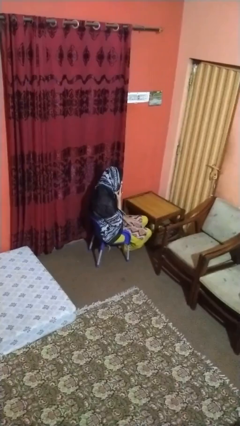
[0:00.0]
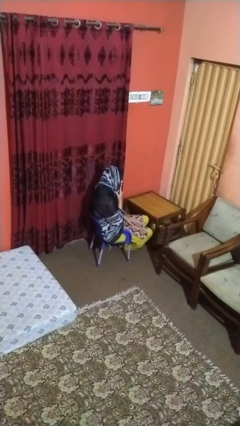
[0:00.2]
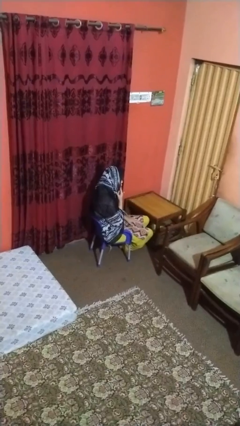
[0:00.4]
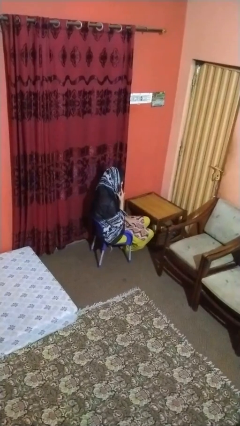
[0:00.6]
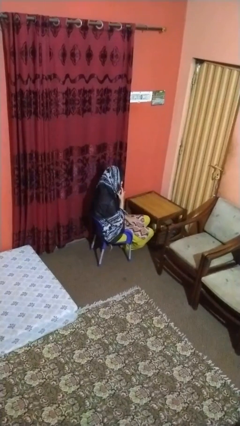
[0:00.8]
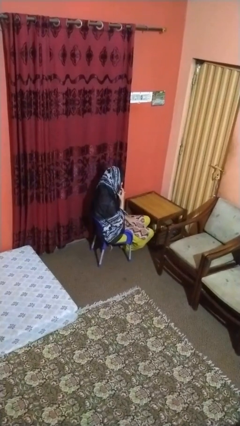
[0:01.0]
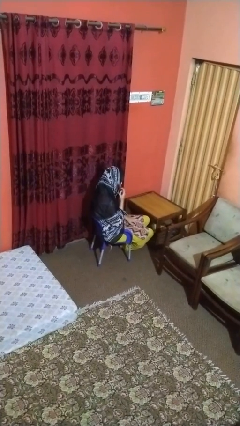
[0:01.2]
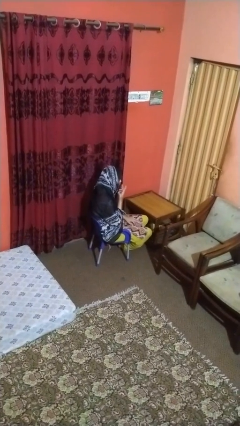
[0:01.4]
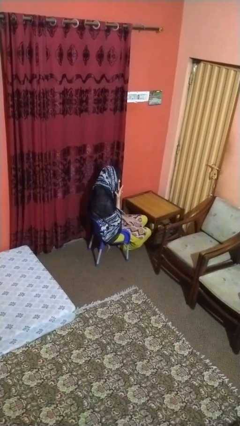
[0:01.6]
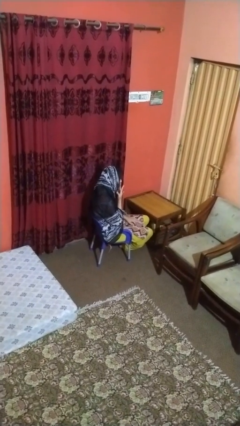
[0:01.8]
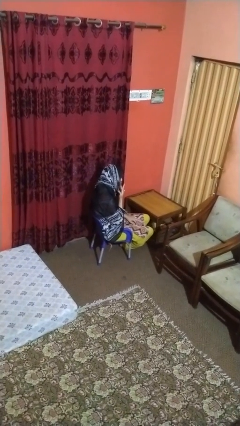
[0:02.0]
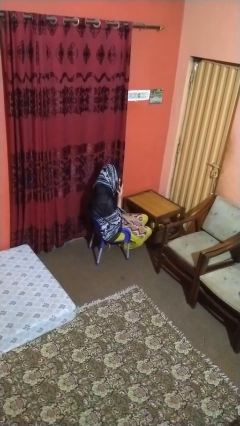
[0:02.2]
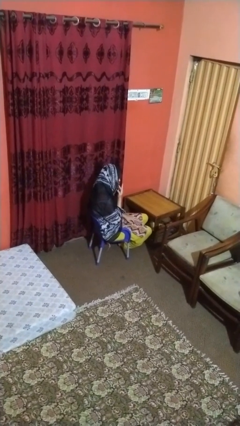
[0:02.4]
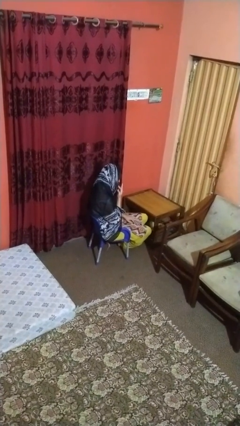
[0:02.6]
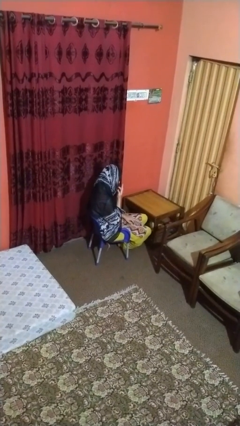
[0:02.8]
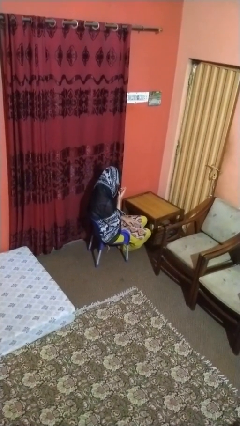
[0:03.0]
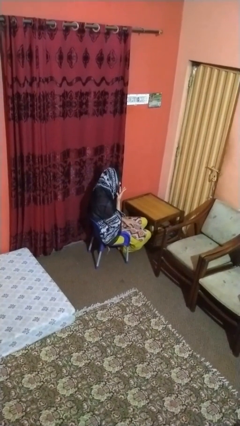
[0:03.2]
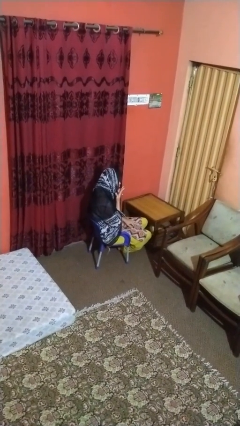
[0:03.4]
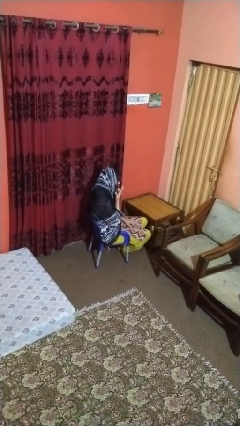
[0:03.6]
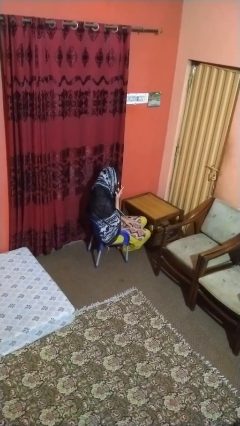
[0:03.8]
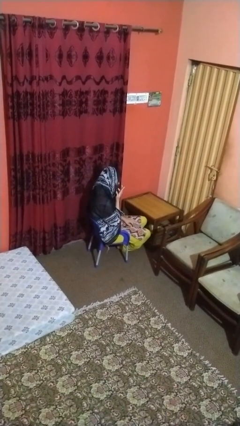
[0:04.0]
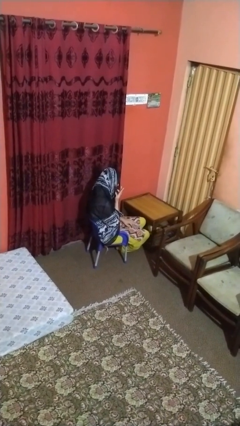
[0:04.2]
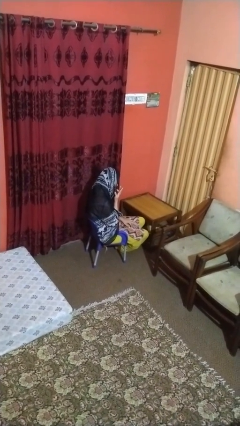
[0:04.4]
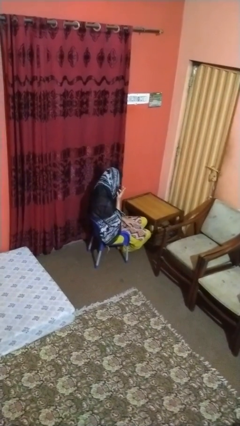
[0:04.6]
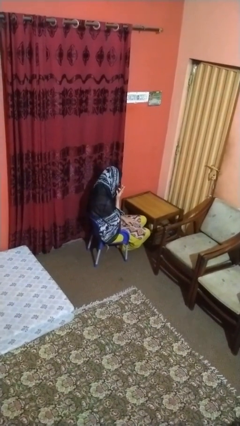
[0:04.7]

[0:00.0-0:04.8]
person licks fingers

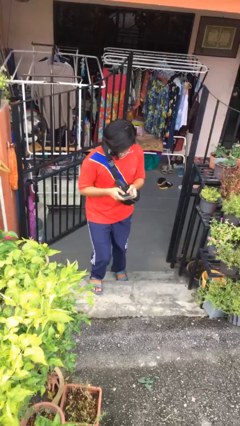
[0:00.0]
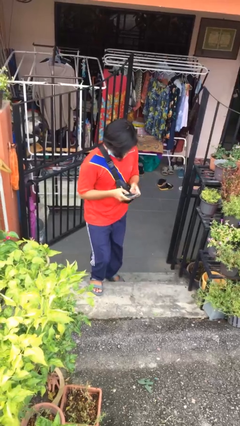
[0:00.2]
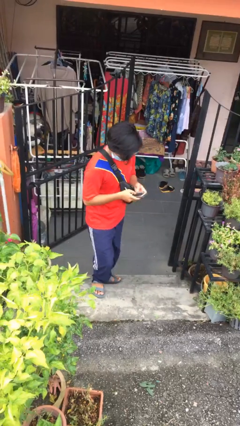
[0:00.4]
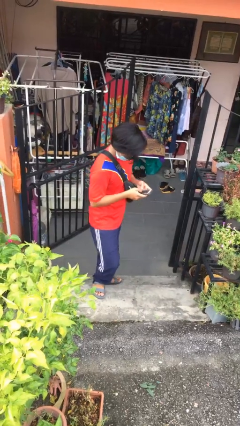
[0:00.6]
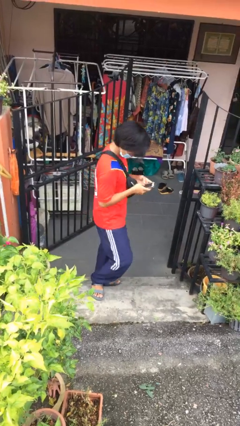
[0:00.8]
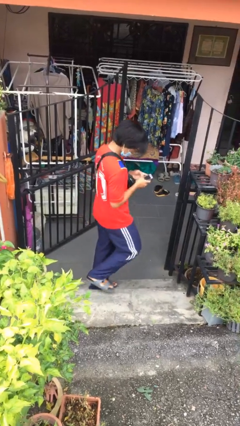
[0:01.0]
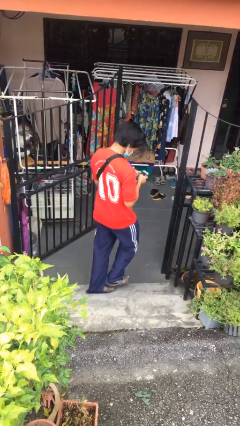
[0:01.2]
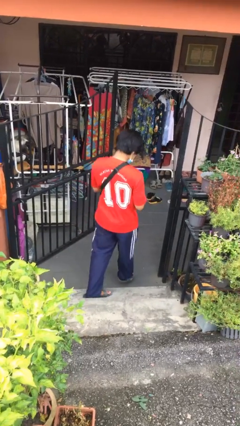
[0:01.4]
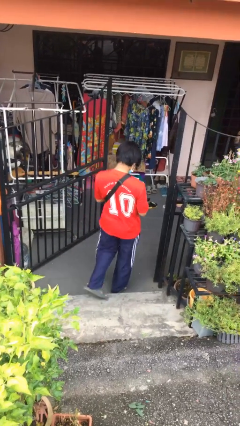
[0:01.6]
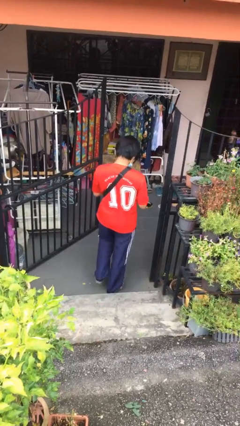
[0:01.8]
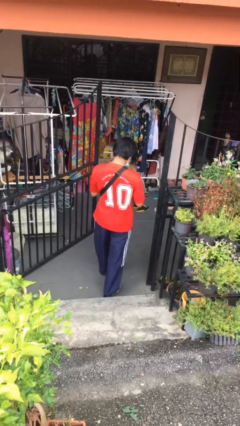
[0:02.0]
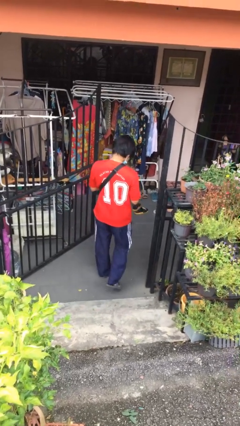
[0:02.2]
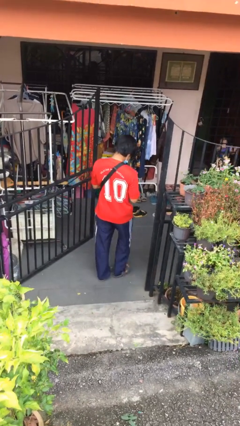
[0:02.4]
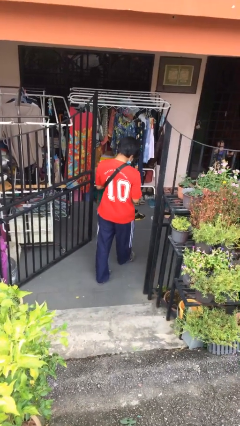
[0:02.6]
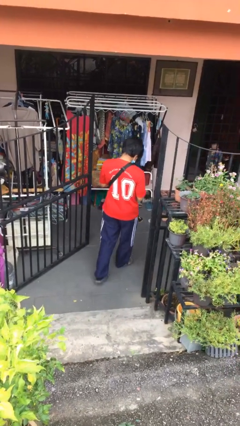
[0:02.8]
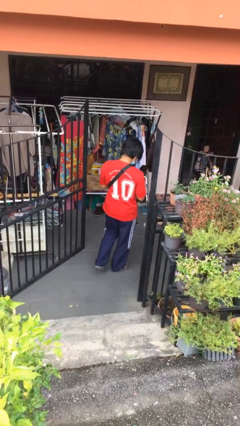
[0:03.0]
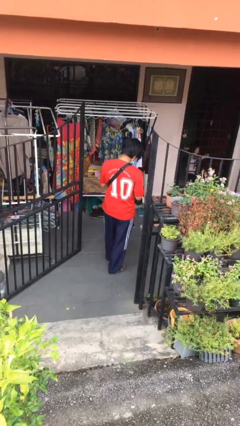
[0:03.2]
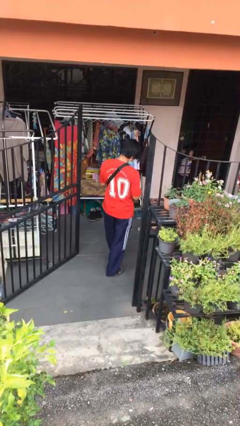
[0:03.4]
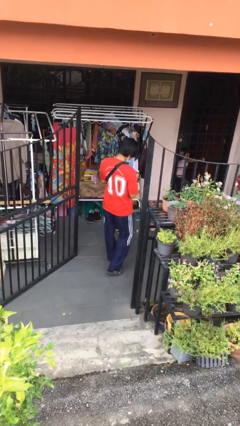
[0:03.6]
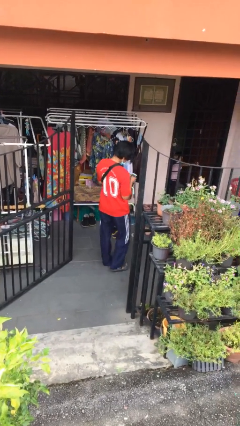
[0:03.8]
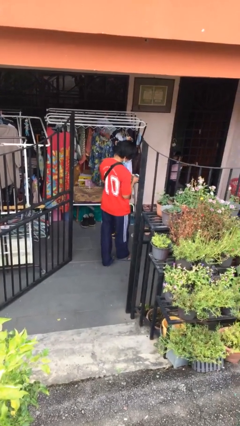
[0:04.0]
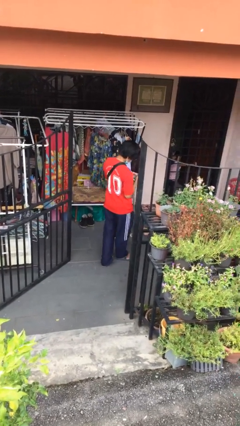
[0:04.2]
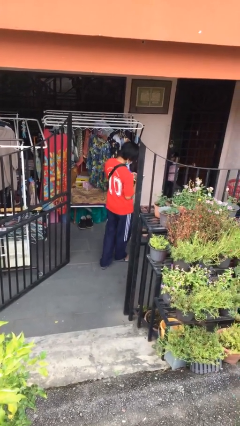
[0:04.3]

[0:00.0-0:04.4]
person exits scene through structure

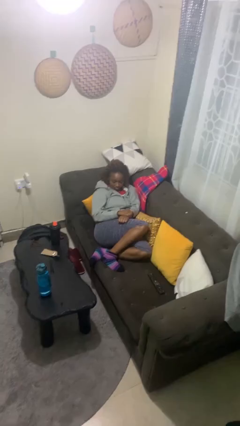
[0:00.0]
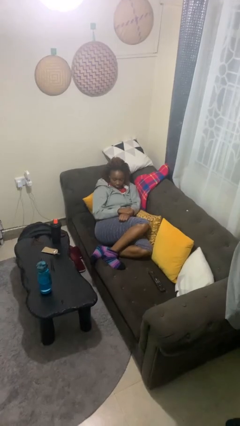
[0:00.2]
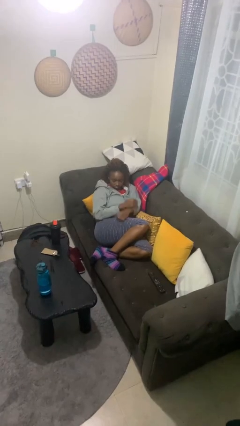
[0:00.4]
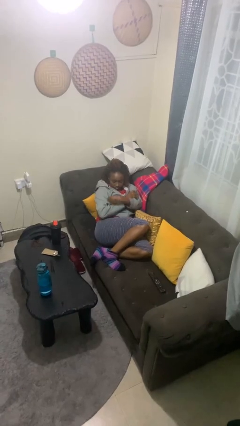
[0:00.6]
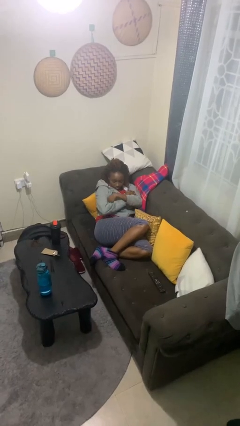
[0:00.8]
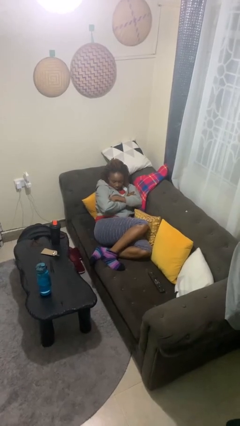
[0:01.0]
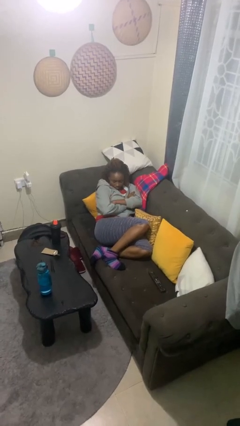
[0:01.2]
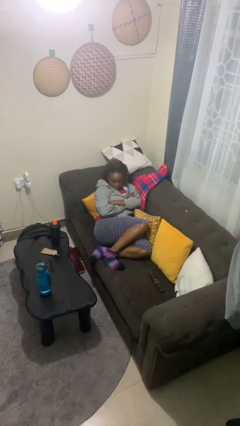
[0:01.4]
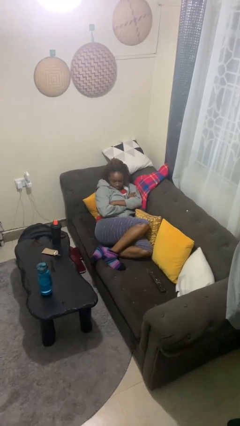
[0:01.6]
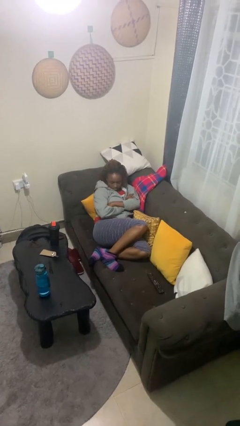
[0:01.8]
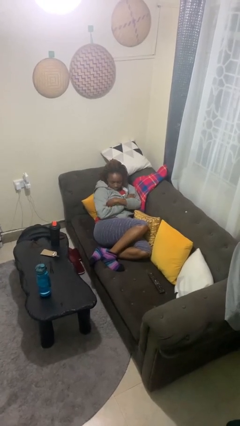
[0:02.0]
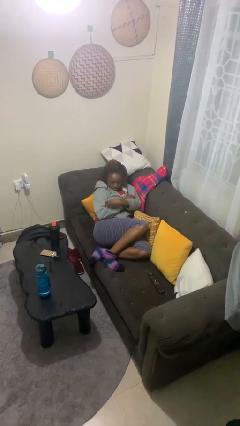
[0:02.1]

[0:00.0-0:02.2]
person crosses arms

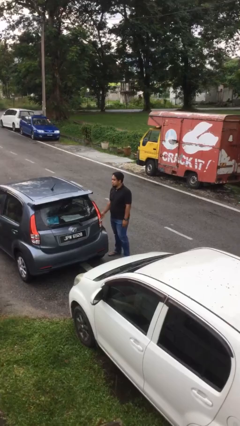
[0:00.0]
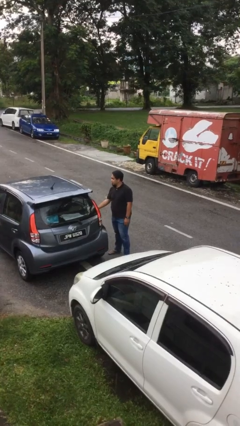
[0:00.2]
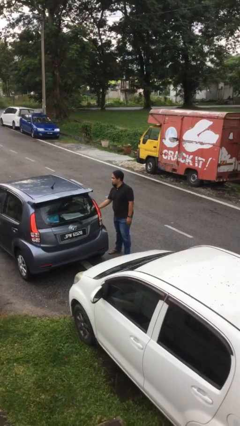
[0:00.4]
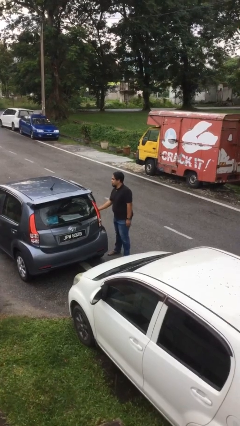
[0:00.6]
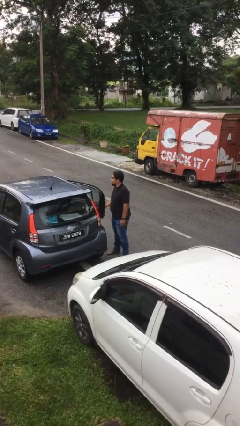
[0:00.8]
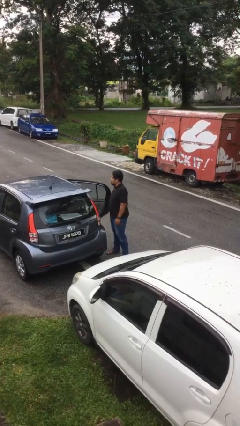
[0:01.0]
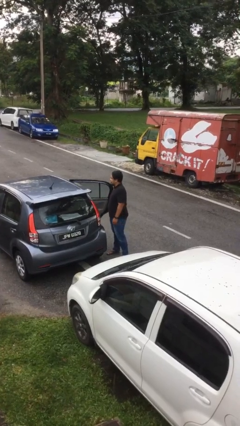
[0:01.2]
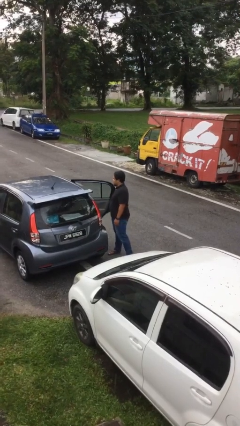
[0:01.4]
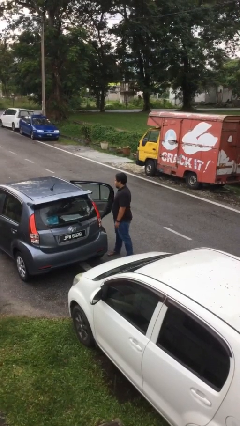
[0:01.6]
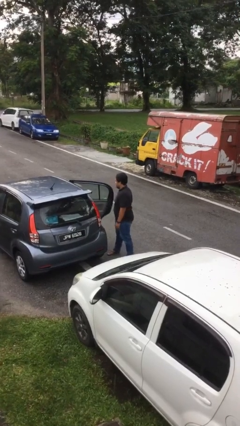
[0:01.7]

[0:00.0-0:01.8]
person opens car door

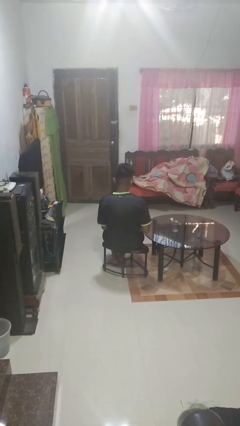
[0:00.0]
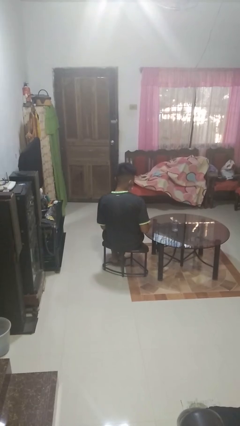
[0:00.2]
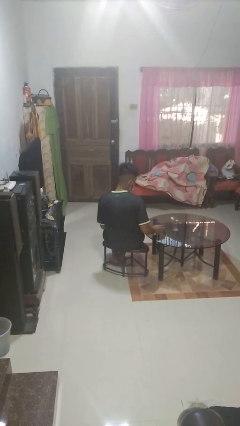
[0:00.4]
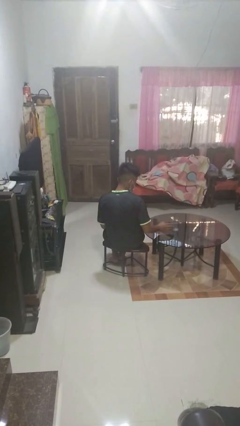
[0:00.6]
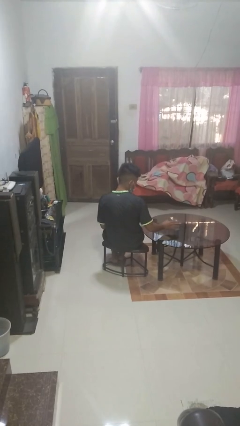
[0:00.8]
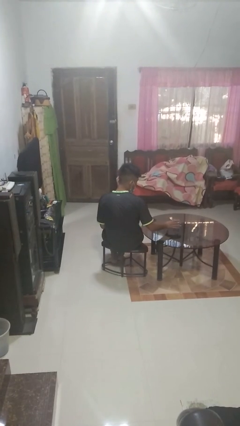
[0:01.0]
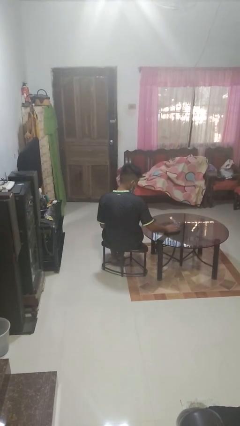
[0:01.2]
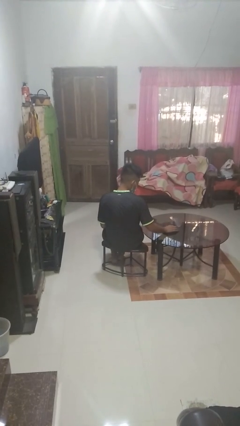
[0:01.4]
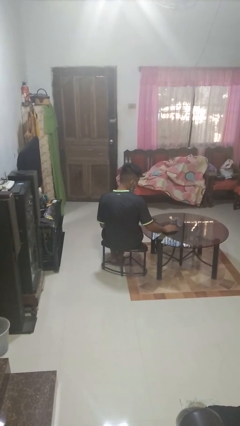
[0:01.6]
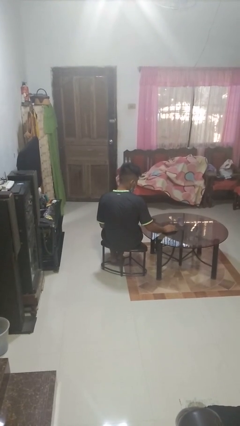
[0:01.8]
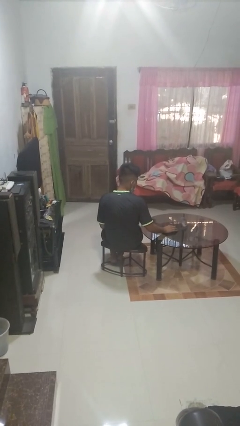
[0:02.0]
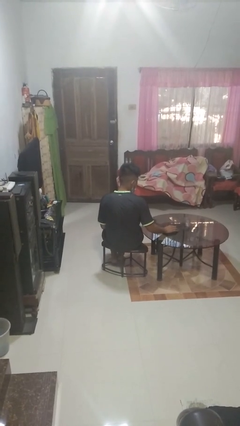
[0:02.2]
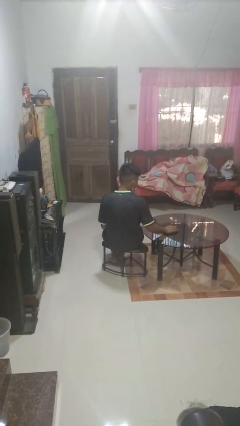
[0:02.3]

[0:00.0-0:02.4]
person knocks over glass

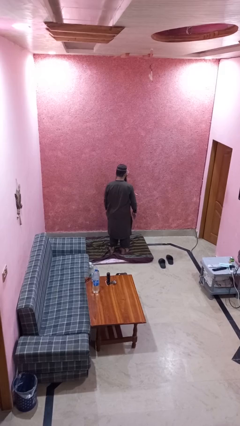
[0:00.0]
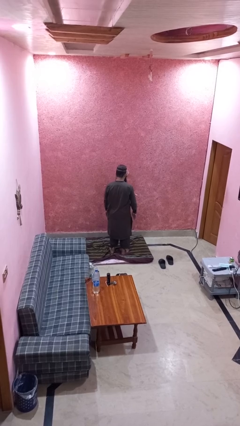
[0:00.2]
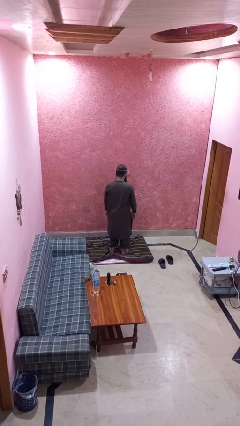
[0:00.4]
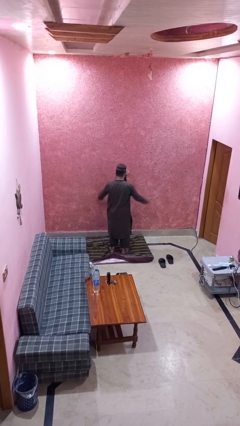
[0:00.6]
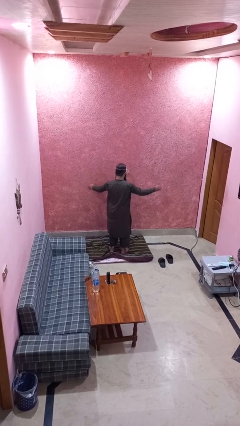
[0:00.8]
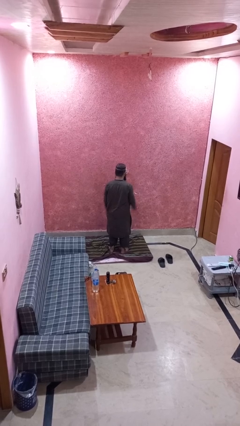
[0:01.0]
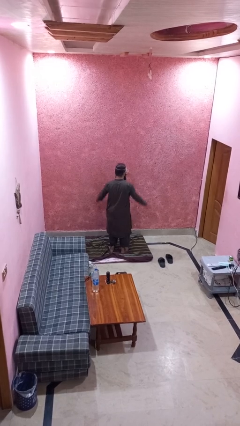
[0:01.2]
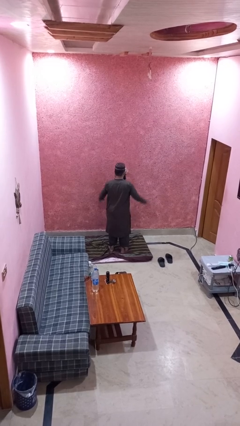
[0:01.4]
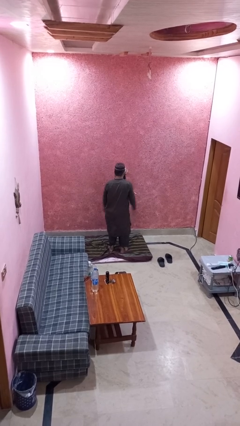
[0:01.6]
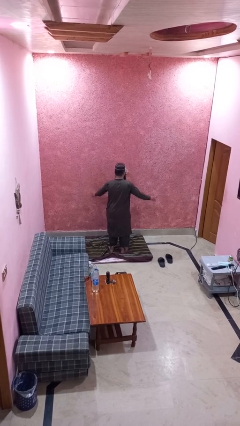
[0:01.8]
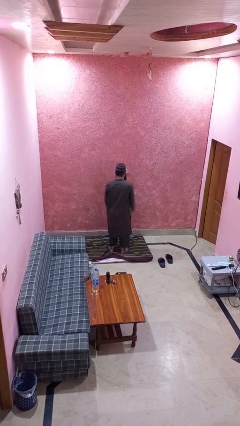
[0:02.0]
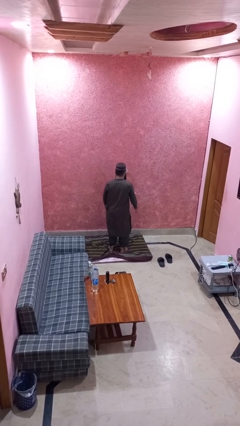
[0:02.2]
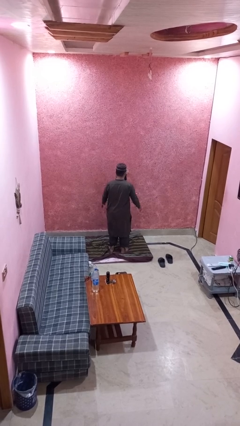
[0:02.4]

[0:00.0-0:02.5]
person slaps hands on thighs
